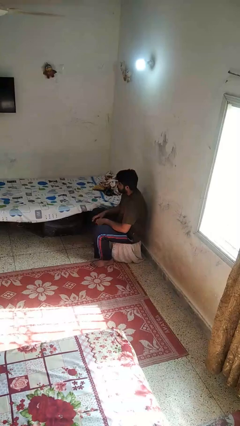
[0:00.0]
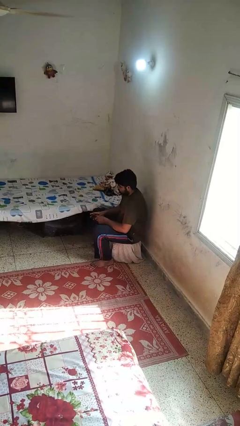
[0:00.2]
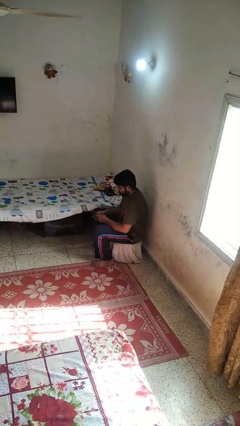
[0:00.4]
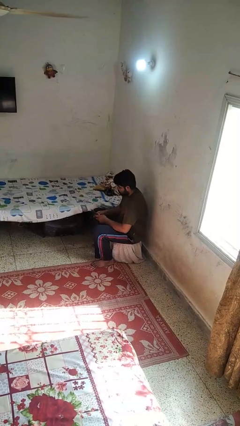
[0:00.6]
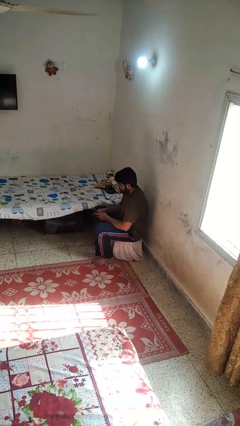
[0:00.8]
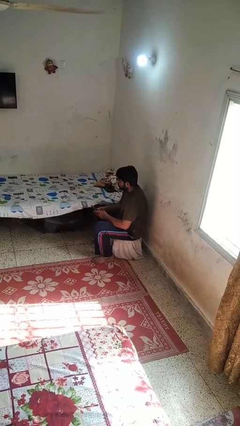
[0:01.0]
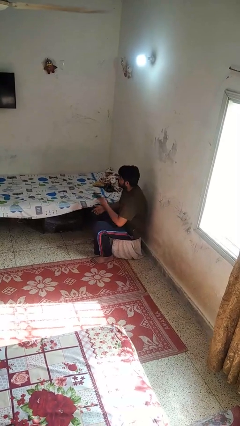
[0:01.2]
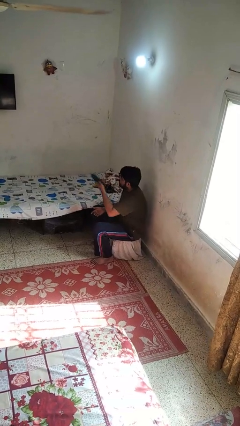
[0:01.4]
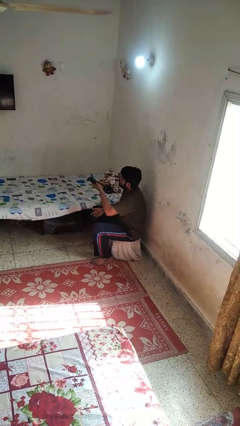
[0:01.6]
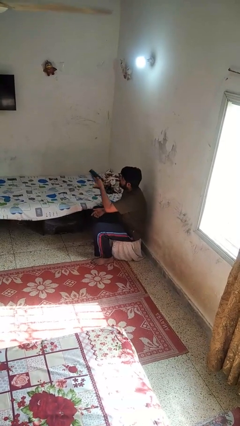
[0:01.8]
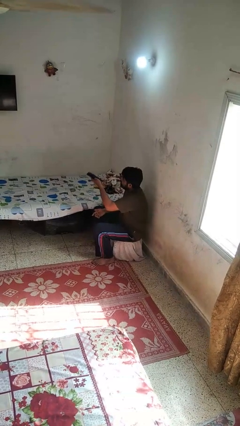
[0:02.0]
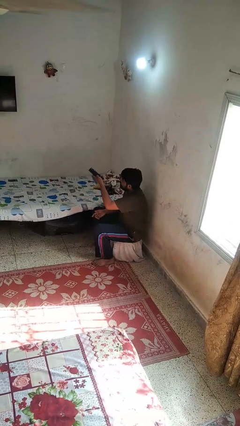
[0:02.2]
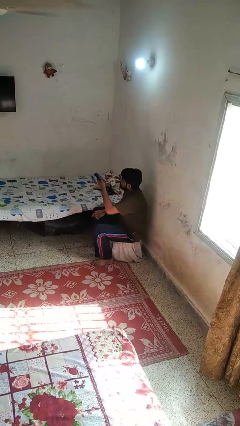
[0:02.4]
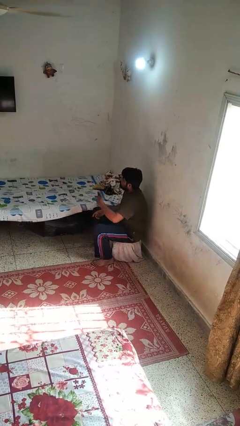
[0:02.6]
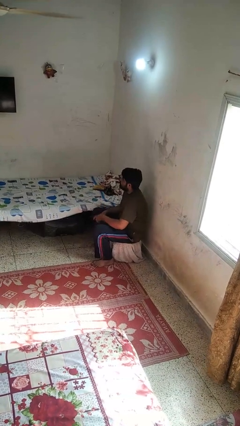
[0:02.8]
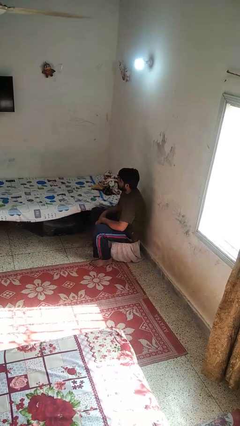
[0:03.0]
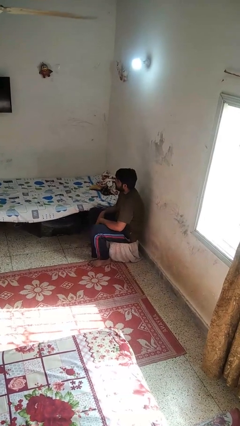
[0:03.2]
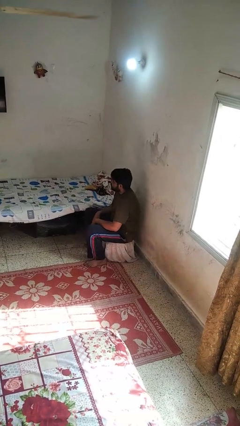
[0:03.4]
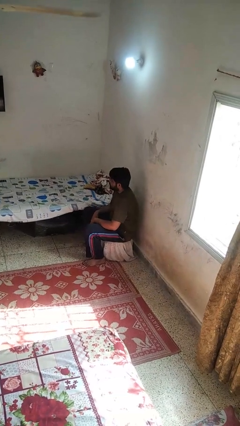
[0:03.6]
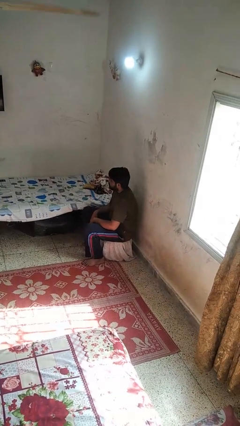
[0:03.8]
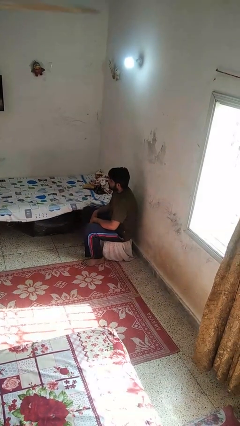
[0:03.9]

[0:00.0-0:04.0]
person uses television remote

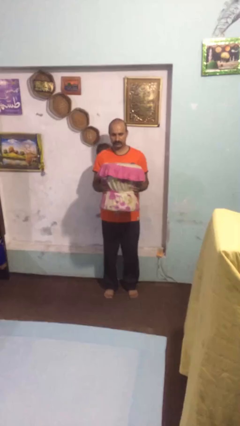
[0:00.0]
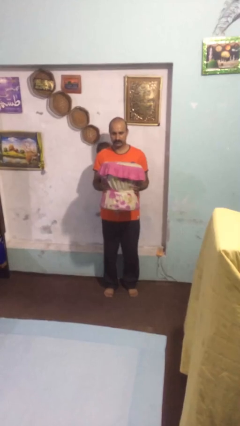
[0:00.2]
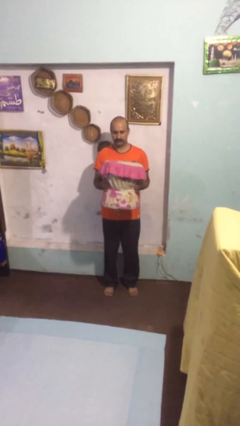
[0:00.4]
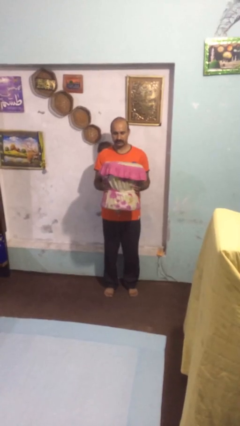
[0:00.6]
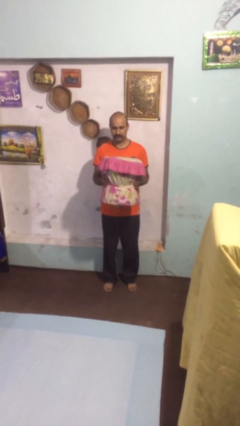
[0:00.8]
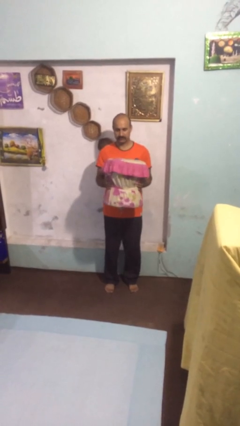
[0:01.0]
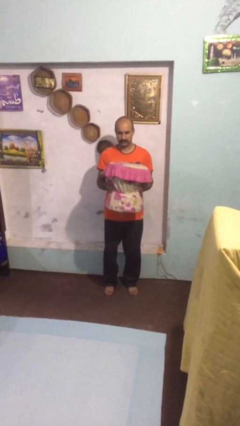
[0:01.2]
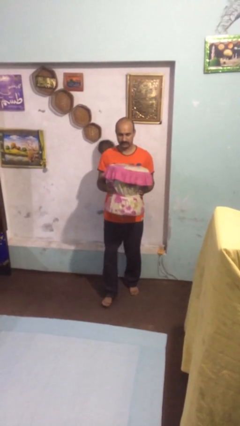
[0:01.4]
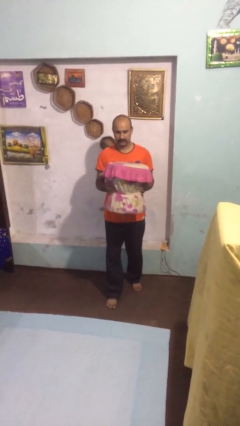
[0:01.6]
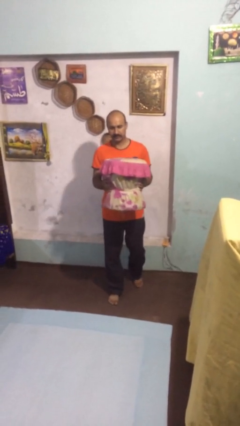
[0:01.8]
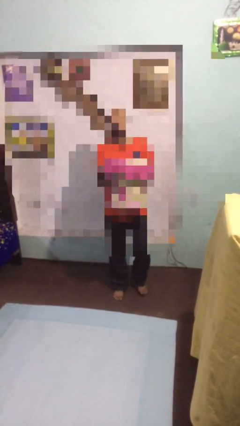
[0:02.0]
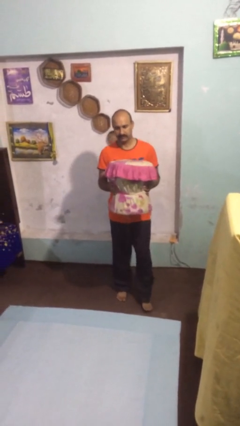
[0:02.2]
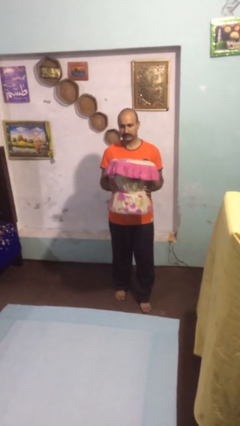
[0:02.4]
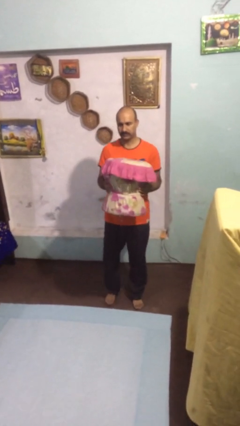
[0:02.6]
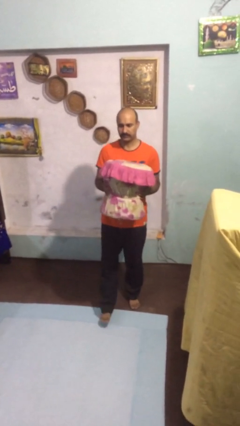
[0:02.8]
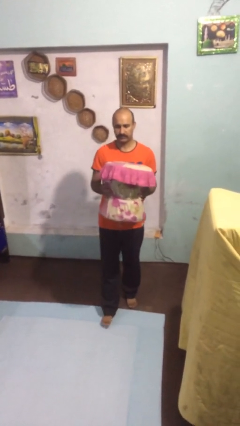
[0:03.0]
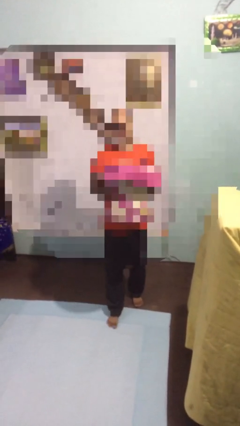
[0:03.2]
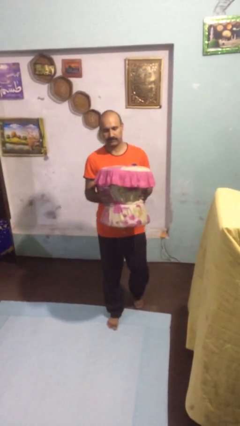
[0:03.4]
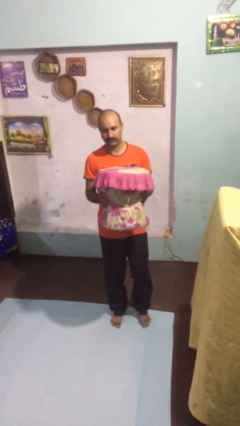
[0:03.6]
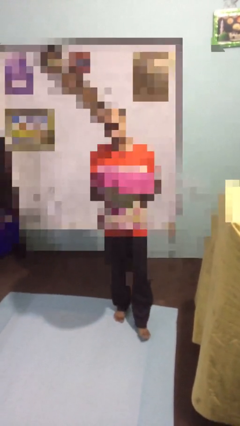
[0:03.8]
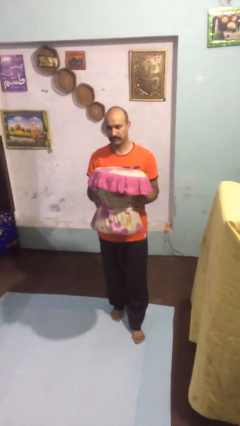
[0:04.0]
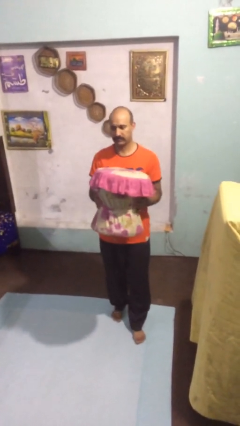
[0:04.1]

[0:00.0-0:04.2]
person carries heavy object

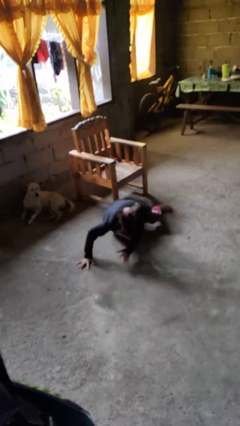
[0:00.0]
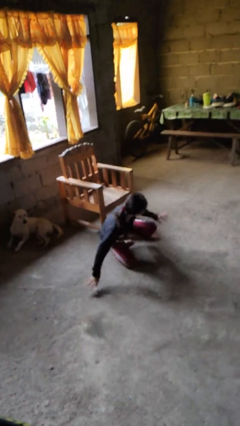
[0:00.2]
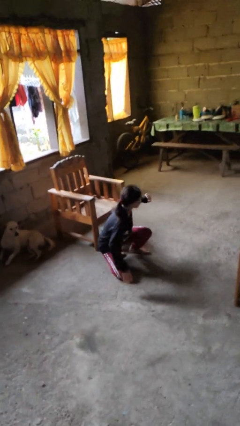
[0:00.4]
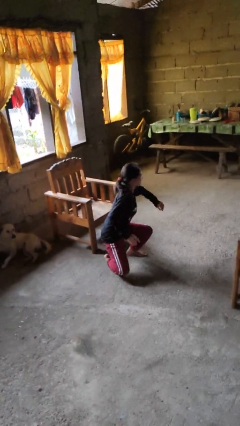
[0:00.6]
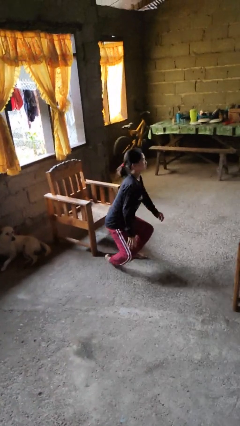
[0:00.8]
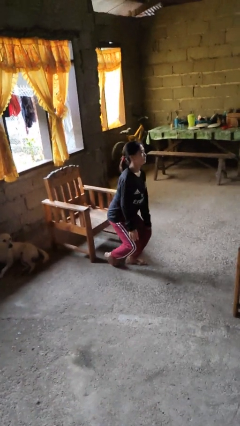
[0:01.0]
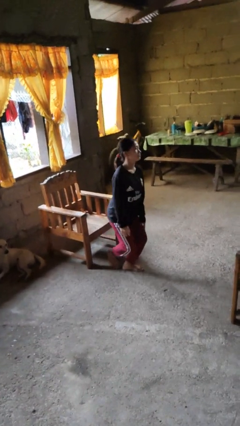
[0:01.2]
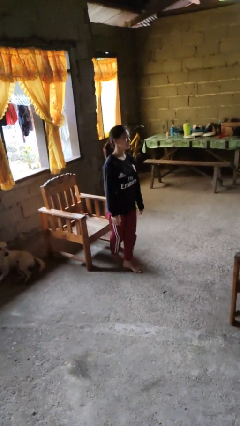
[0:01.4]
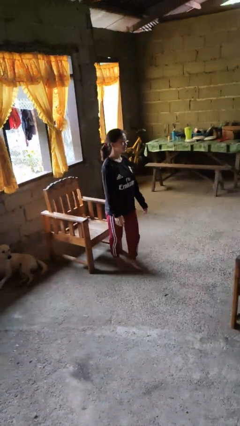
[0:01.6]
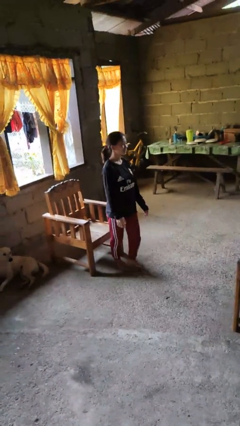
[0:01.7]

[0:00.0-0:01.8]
person stands up from floor

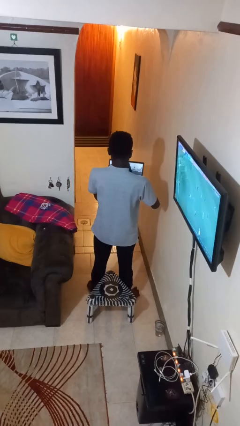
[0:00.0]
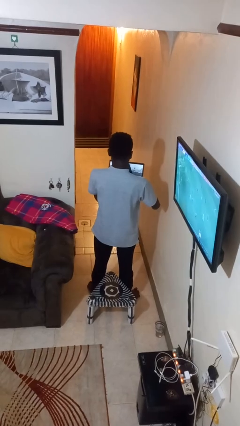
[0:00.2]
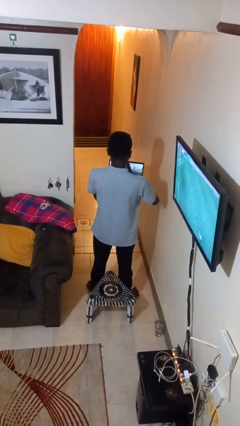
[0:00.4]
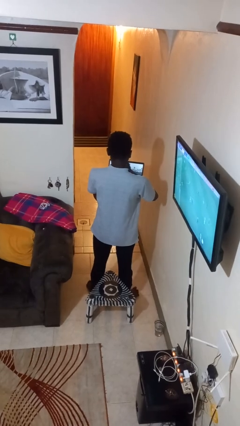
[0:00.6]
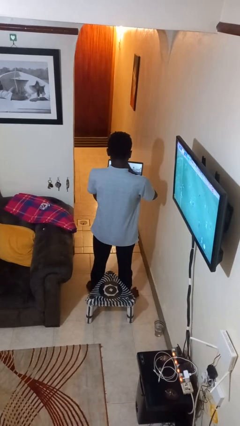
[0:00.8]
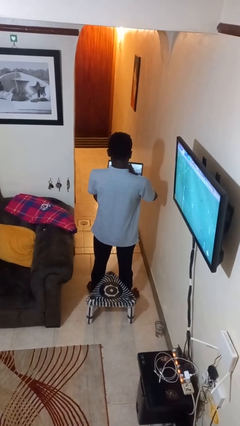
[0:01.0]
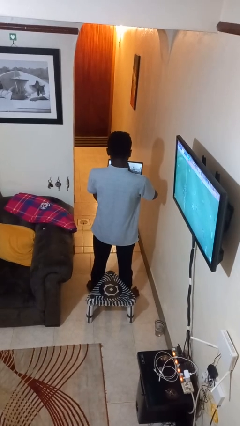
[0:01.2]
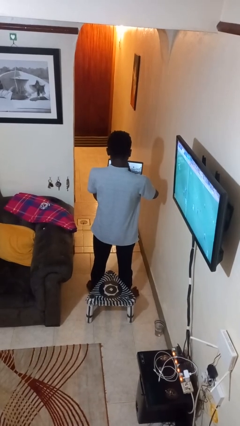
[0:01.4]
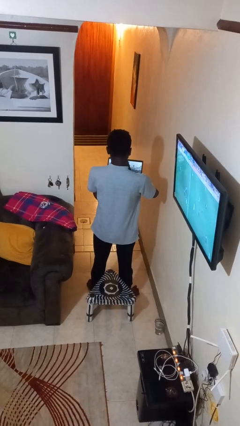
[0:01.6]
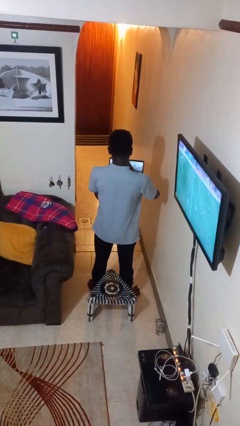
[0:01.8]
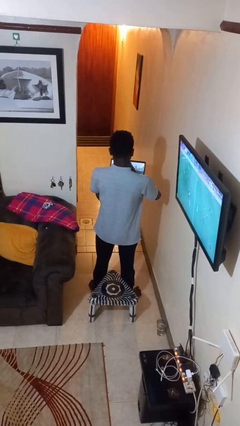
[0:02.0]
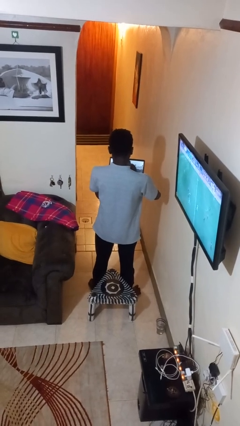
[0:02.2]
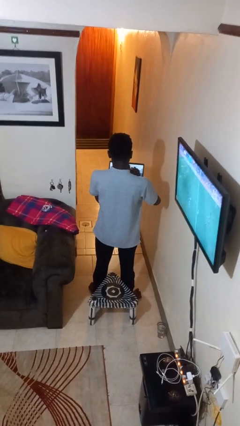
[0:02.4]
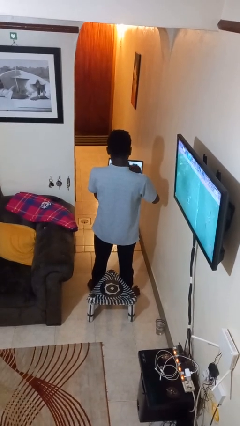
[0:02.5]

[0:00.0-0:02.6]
person interacts with tablet

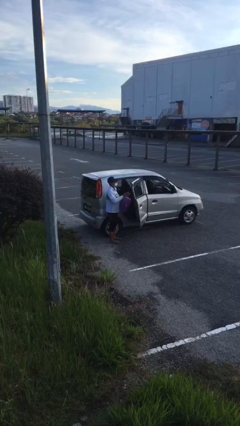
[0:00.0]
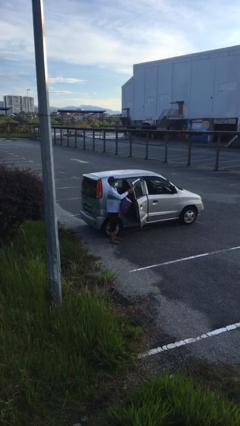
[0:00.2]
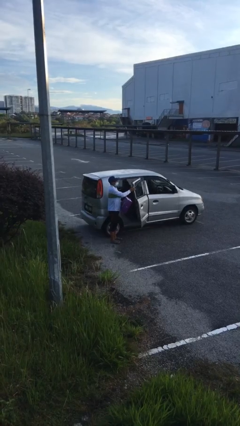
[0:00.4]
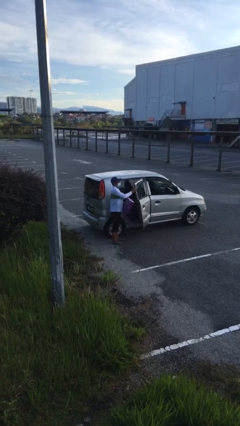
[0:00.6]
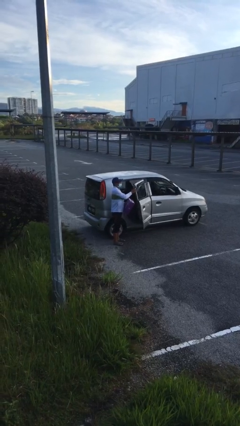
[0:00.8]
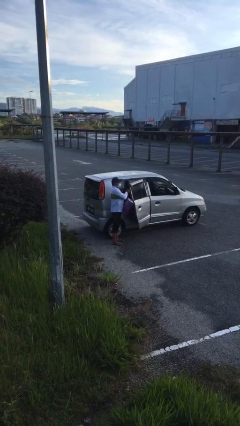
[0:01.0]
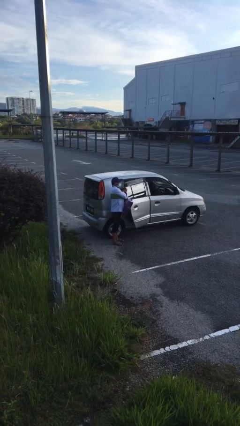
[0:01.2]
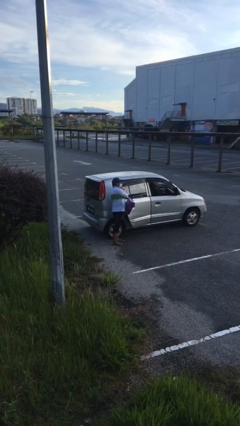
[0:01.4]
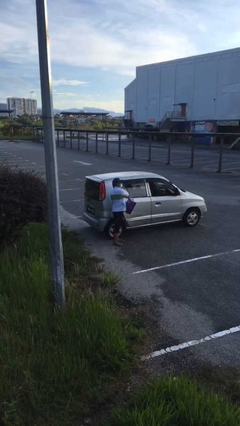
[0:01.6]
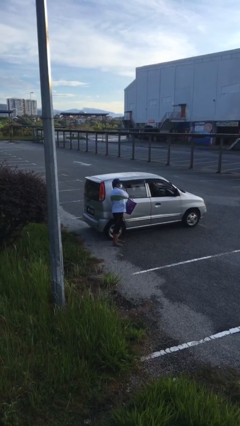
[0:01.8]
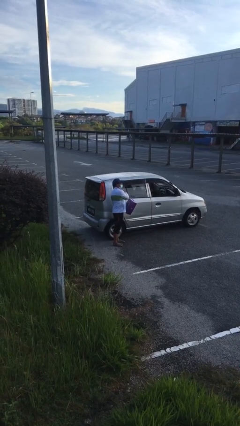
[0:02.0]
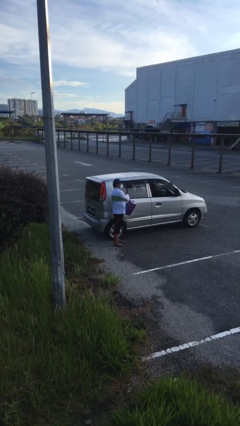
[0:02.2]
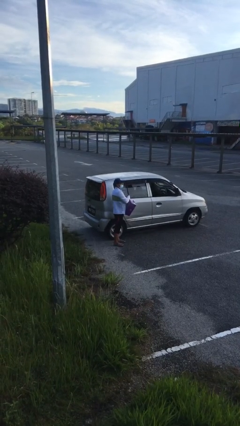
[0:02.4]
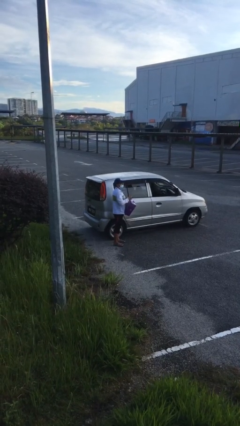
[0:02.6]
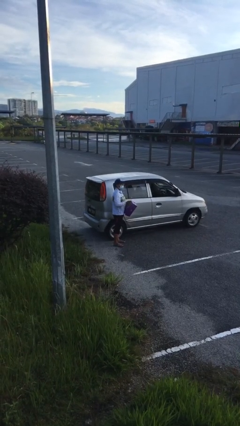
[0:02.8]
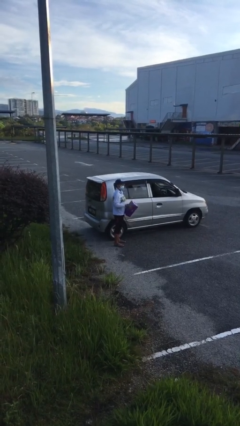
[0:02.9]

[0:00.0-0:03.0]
person closes car door

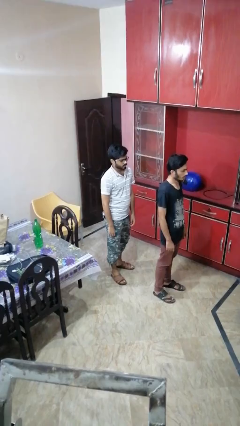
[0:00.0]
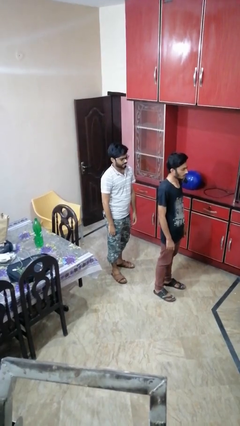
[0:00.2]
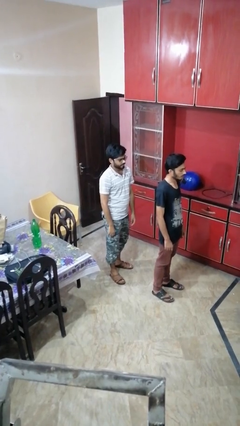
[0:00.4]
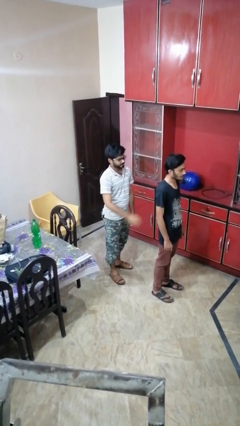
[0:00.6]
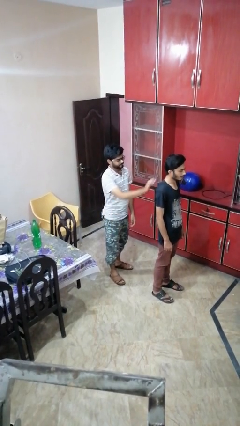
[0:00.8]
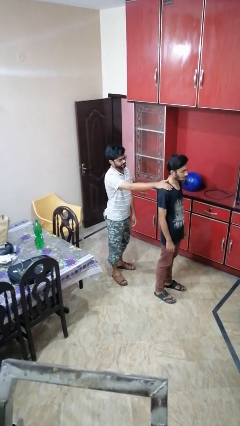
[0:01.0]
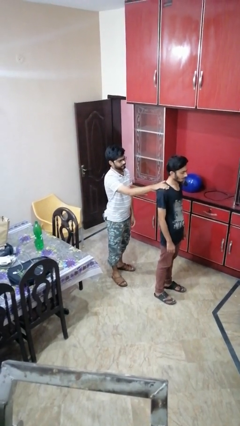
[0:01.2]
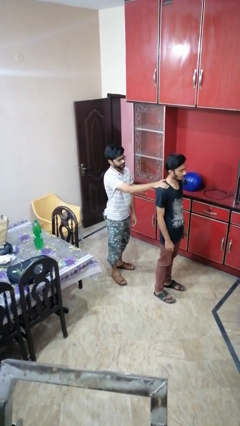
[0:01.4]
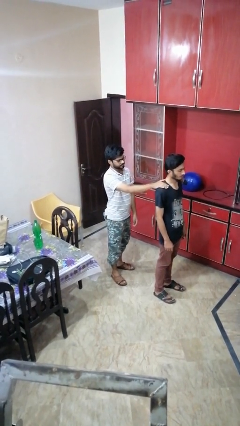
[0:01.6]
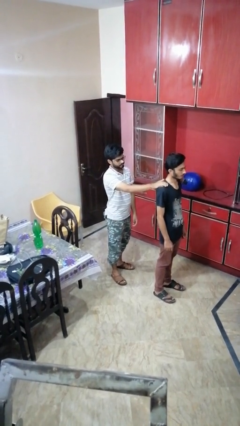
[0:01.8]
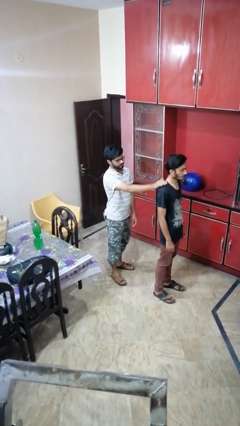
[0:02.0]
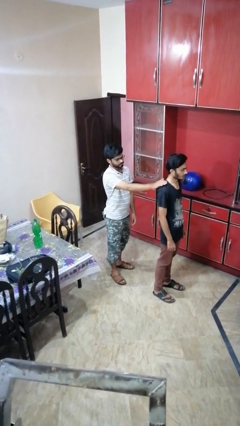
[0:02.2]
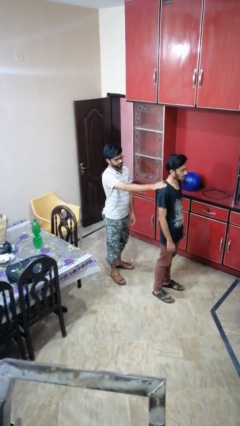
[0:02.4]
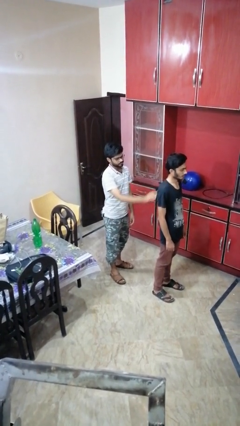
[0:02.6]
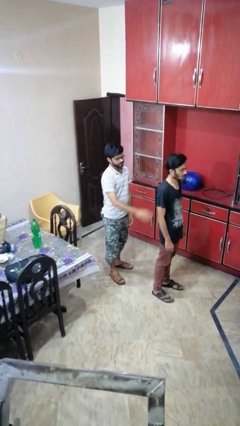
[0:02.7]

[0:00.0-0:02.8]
person touches back of person
